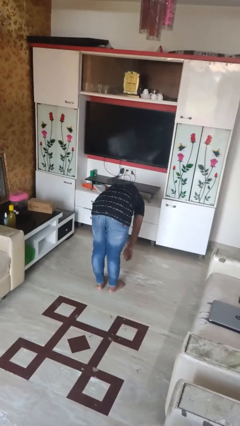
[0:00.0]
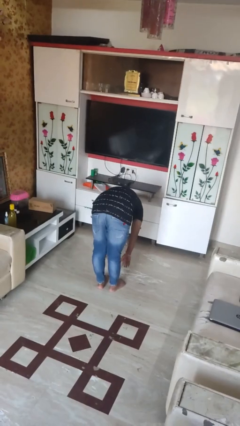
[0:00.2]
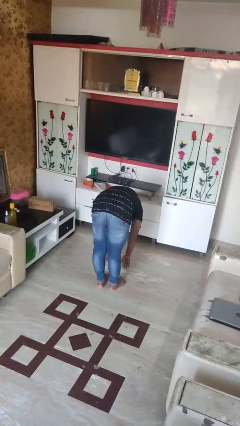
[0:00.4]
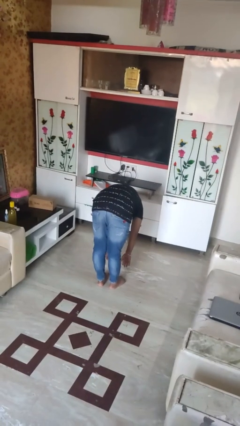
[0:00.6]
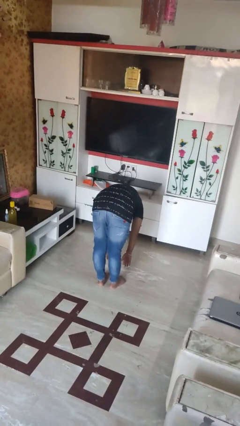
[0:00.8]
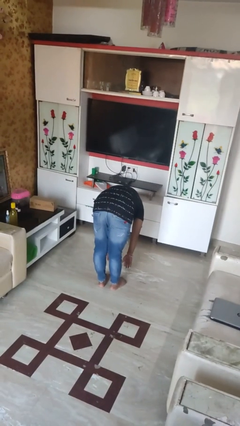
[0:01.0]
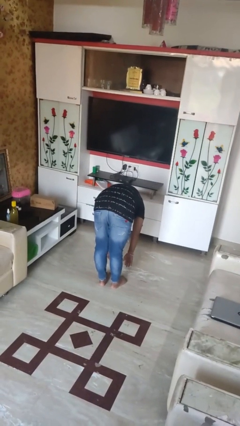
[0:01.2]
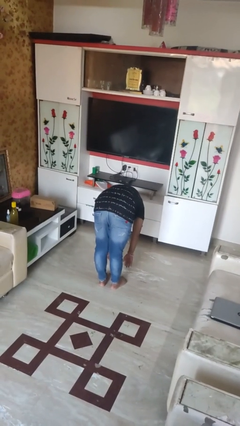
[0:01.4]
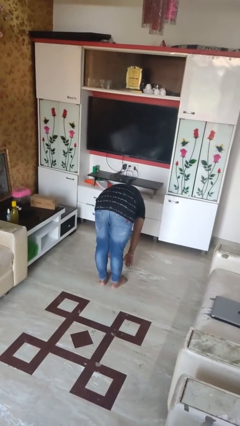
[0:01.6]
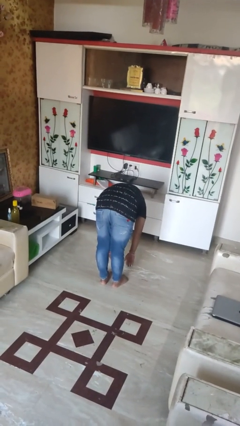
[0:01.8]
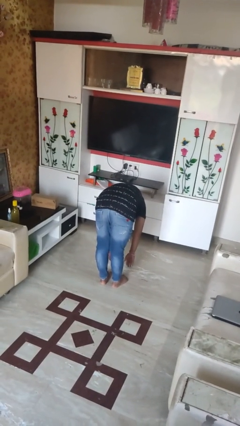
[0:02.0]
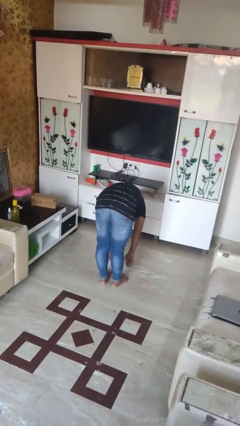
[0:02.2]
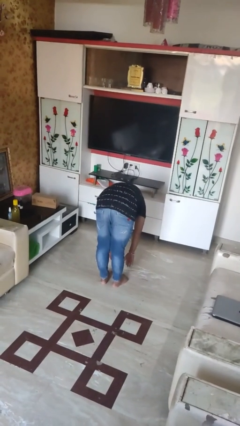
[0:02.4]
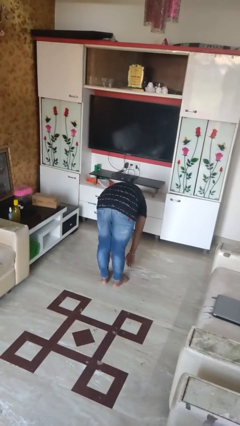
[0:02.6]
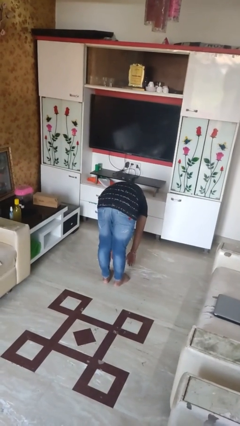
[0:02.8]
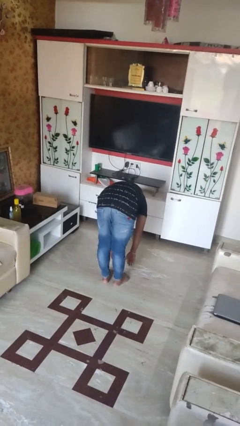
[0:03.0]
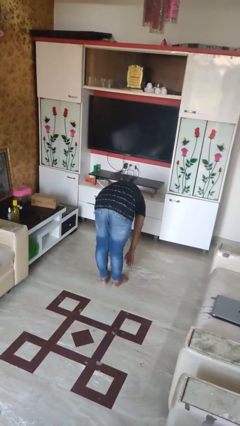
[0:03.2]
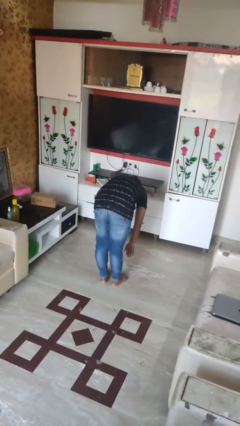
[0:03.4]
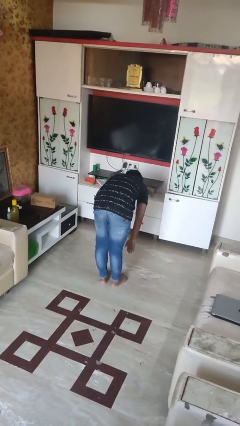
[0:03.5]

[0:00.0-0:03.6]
person bows

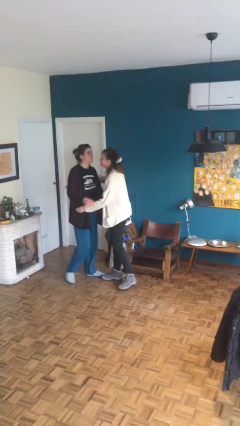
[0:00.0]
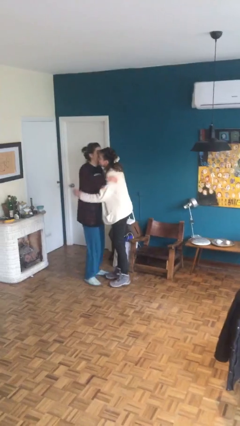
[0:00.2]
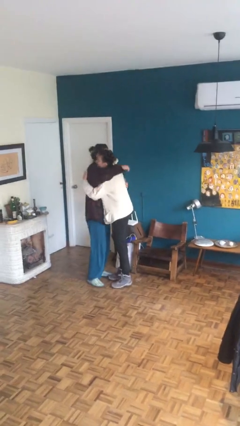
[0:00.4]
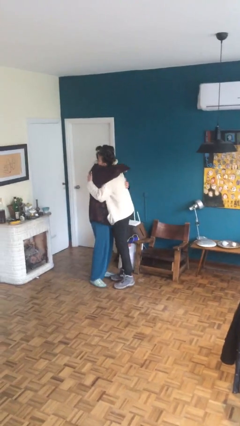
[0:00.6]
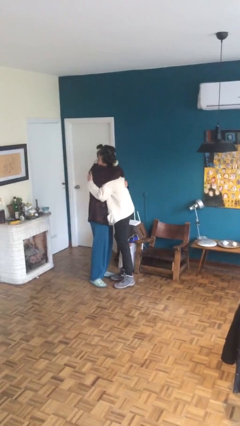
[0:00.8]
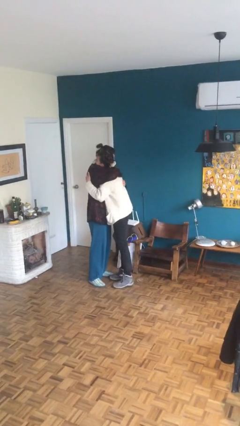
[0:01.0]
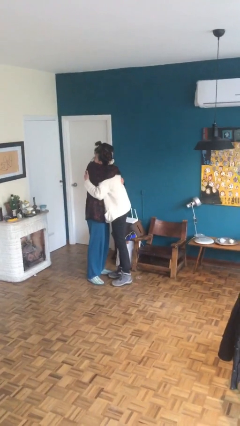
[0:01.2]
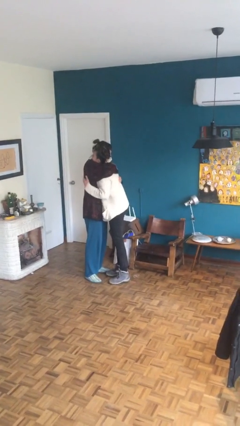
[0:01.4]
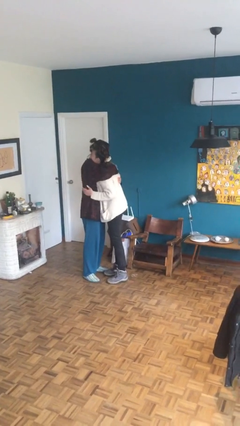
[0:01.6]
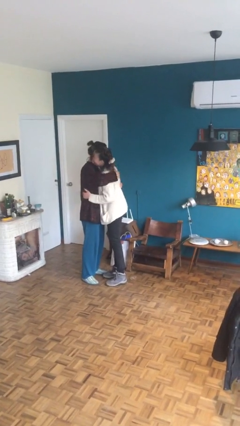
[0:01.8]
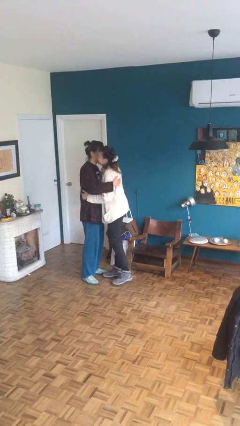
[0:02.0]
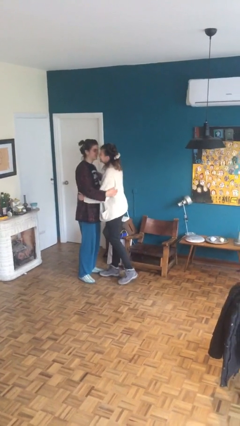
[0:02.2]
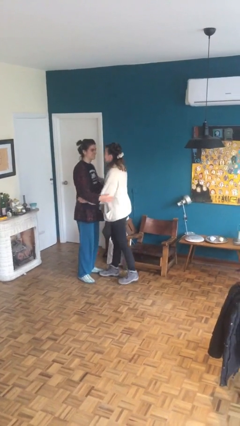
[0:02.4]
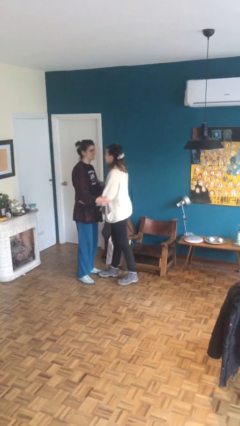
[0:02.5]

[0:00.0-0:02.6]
person embraces person

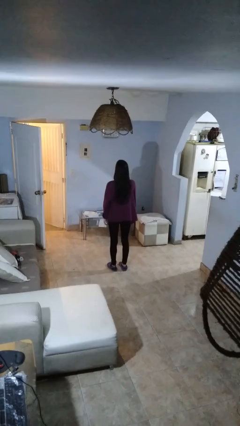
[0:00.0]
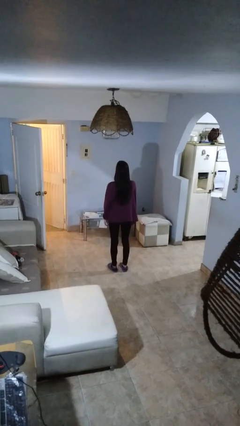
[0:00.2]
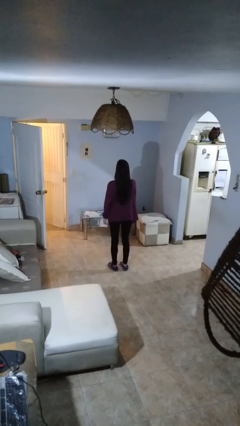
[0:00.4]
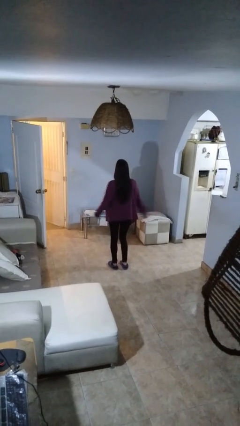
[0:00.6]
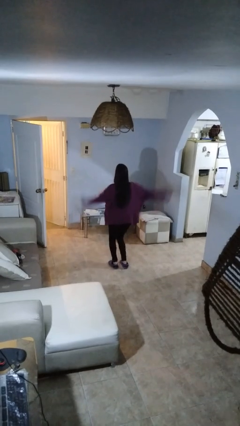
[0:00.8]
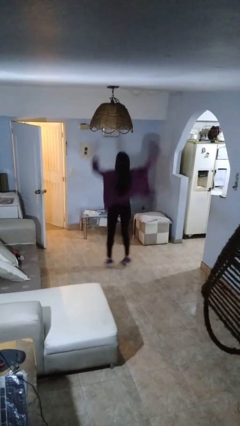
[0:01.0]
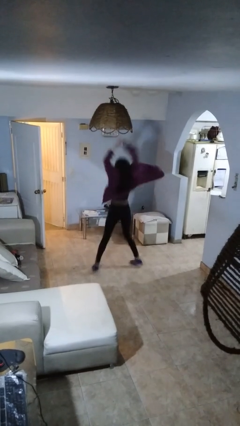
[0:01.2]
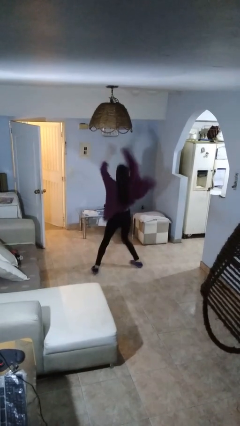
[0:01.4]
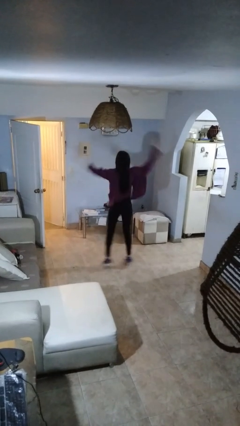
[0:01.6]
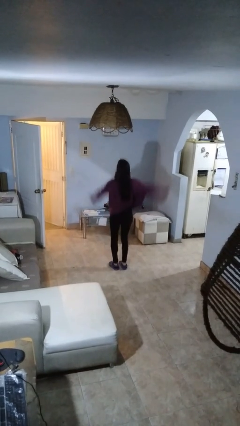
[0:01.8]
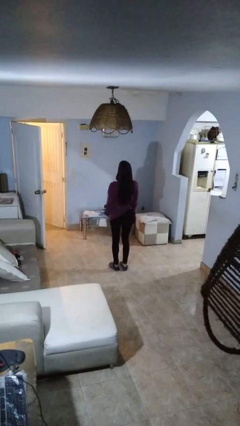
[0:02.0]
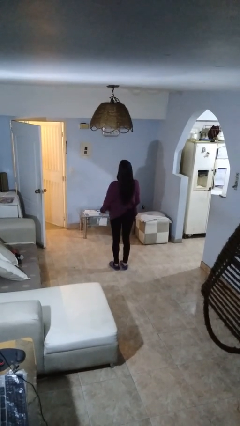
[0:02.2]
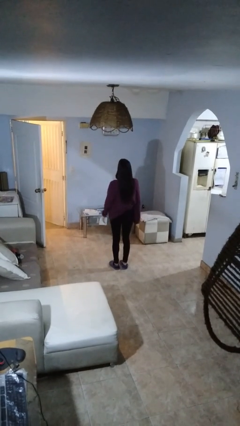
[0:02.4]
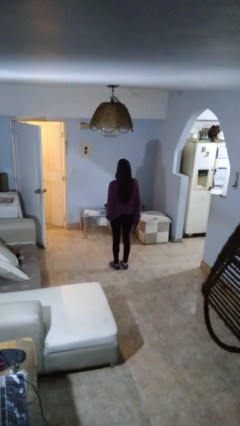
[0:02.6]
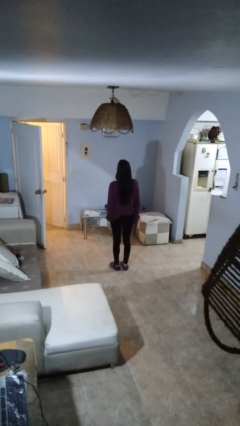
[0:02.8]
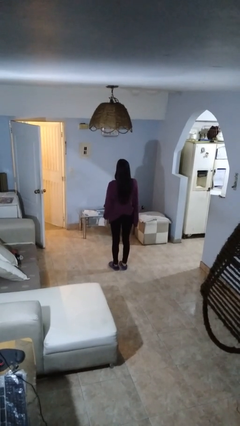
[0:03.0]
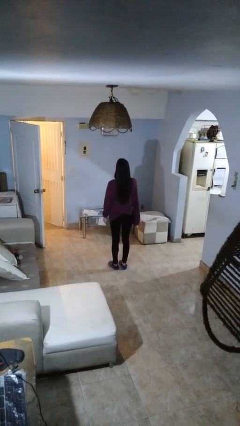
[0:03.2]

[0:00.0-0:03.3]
person exercises with jumping jacks

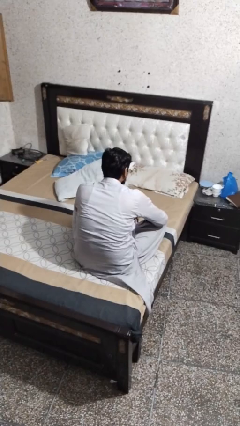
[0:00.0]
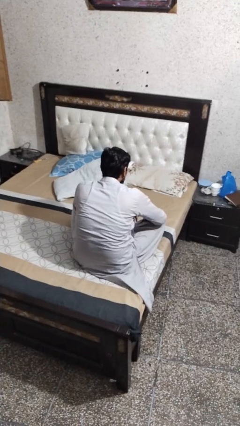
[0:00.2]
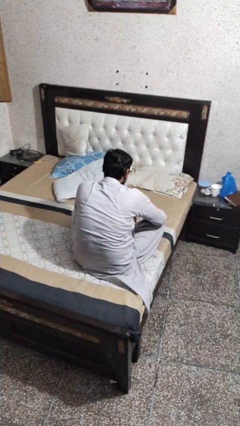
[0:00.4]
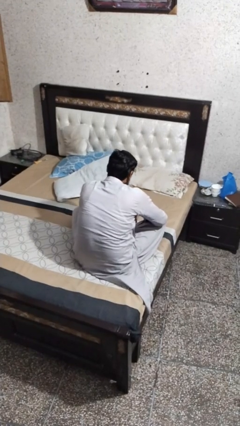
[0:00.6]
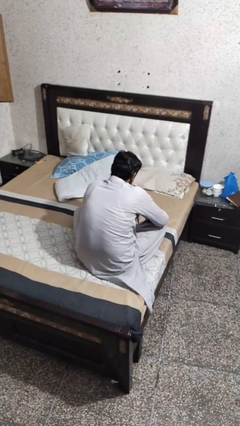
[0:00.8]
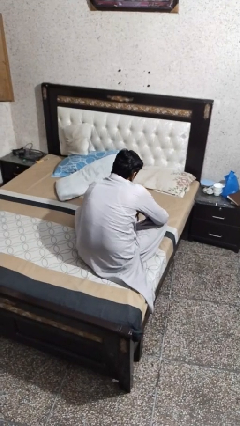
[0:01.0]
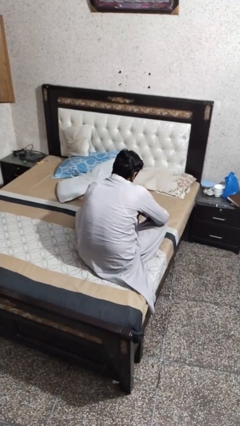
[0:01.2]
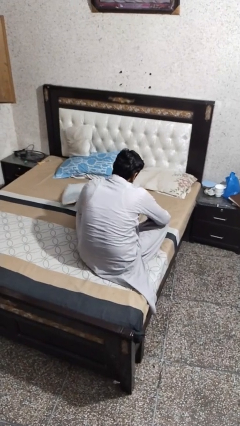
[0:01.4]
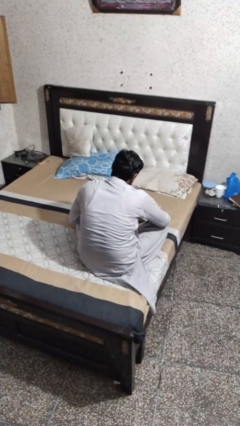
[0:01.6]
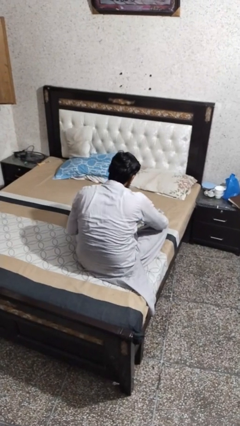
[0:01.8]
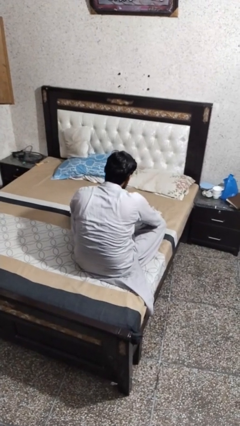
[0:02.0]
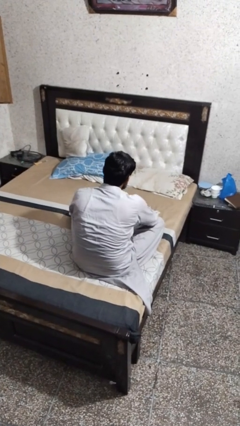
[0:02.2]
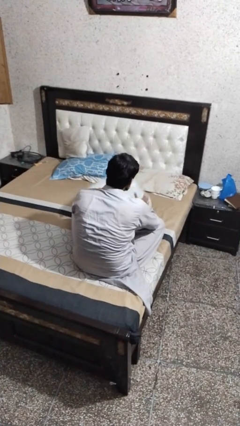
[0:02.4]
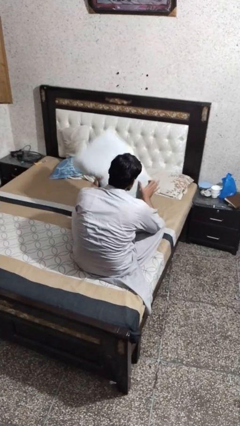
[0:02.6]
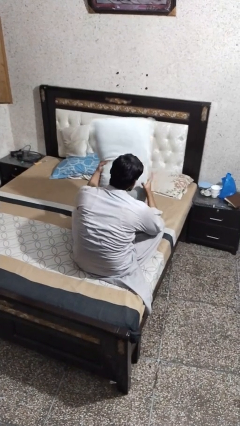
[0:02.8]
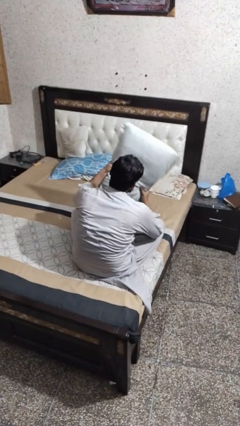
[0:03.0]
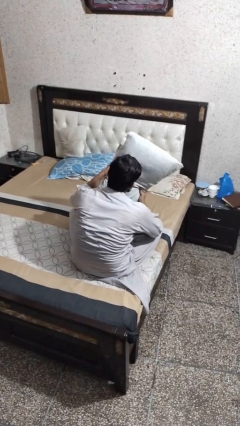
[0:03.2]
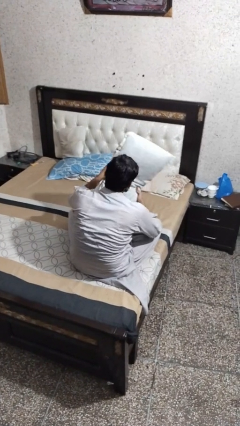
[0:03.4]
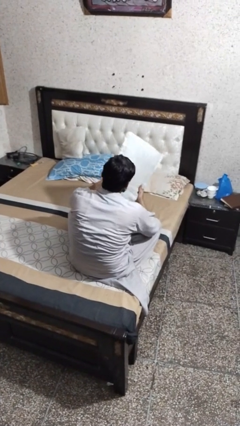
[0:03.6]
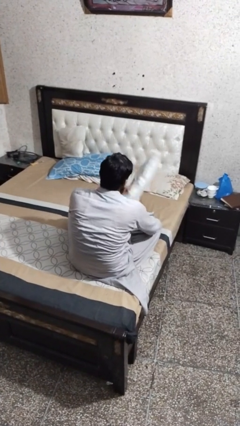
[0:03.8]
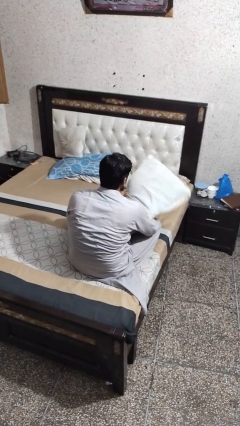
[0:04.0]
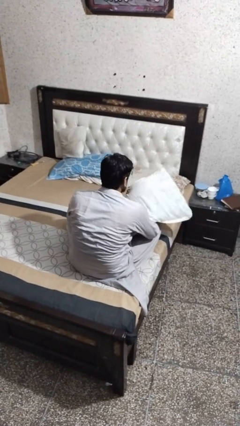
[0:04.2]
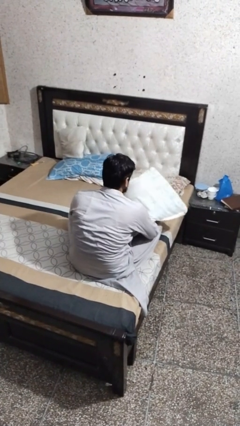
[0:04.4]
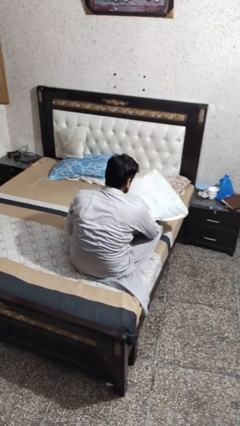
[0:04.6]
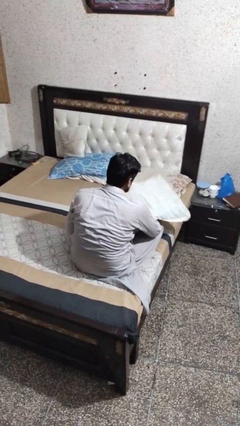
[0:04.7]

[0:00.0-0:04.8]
person picks up object from bed

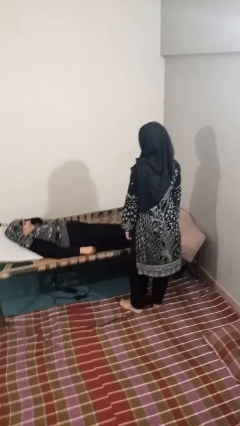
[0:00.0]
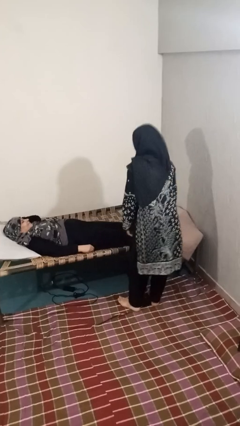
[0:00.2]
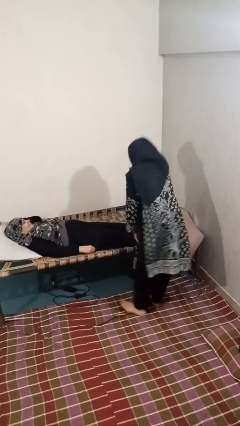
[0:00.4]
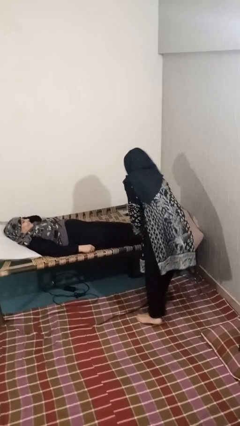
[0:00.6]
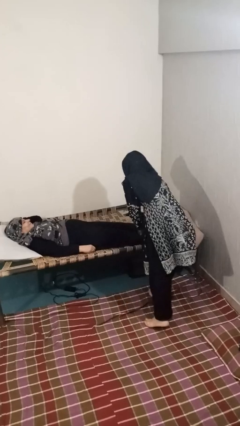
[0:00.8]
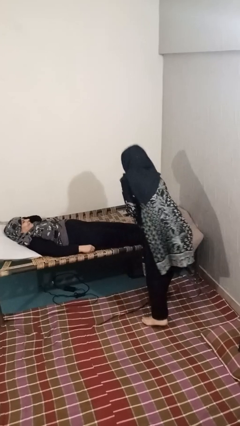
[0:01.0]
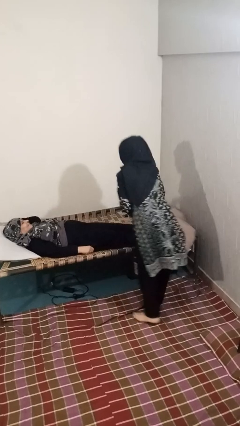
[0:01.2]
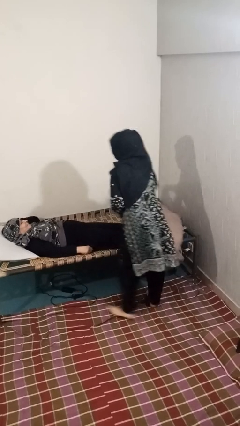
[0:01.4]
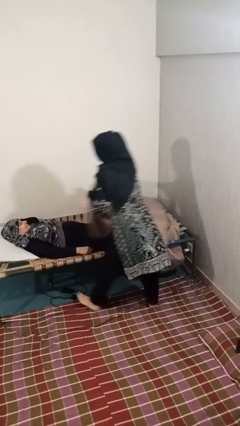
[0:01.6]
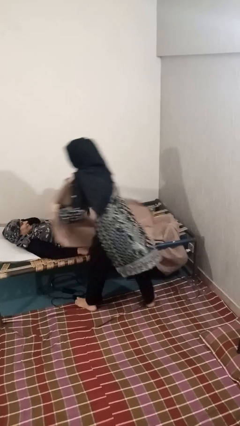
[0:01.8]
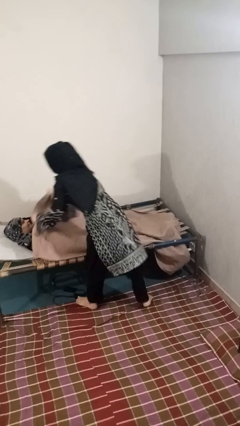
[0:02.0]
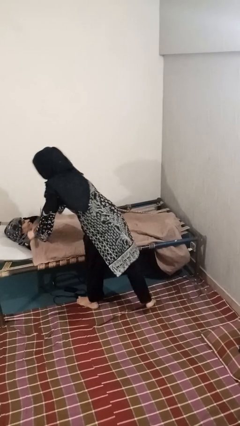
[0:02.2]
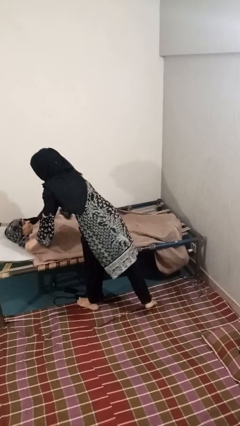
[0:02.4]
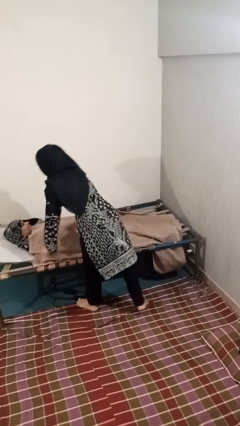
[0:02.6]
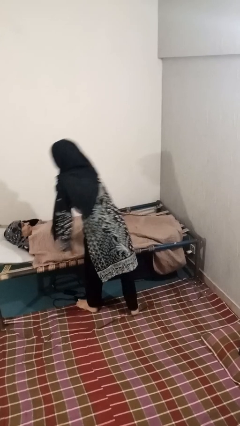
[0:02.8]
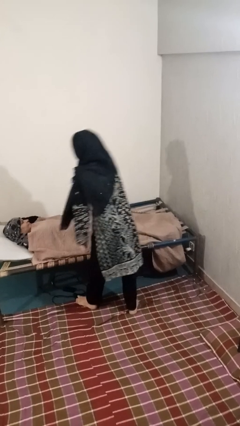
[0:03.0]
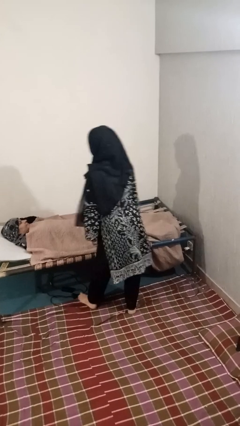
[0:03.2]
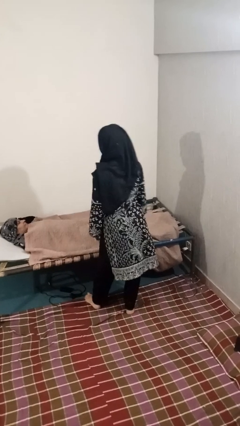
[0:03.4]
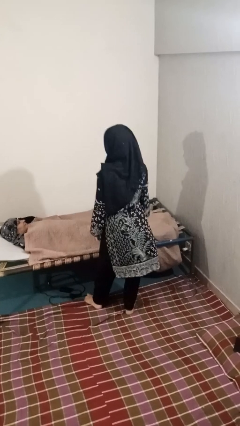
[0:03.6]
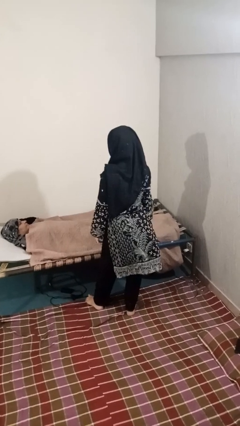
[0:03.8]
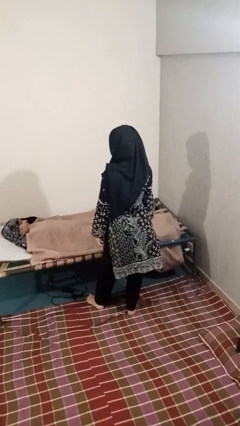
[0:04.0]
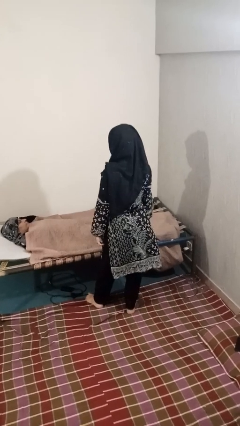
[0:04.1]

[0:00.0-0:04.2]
person covers friend with blanket
